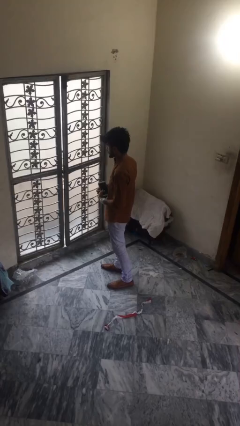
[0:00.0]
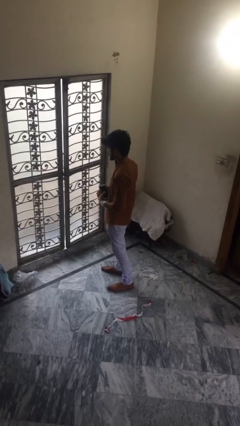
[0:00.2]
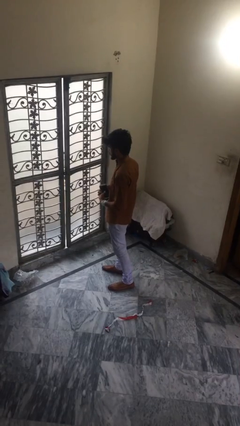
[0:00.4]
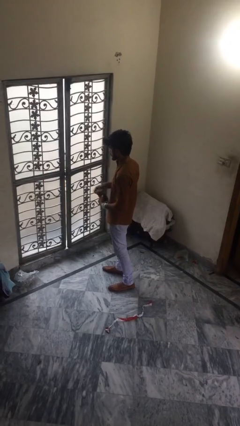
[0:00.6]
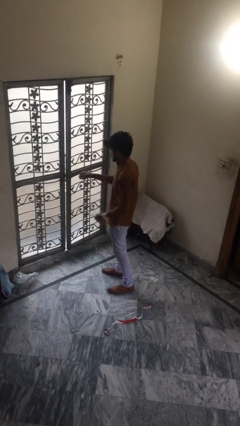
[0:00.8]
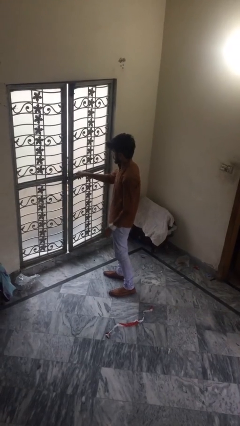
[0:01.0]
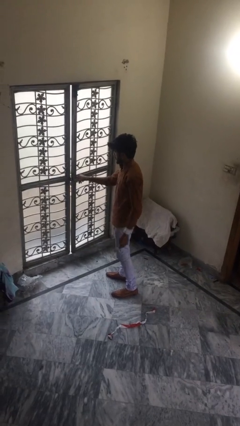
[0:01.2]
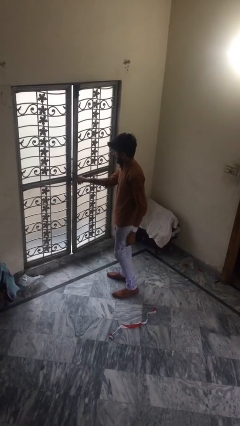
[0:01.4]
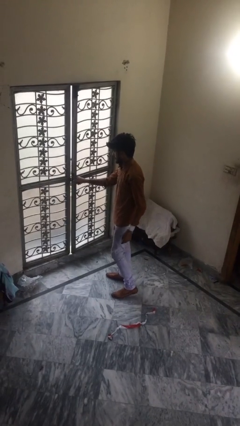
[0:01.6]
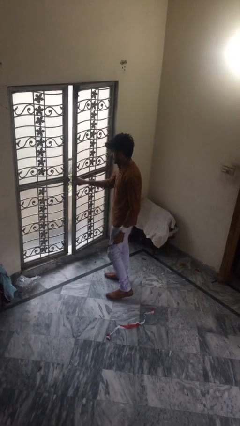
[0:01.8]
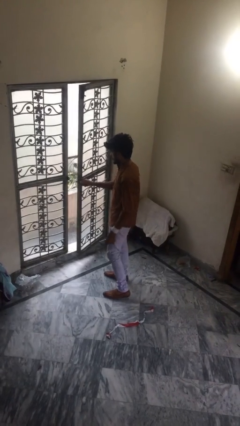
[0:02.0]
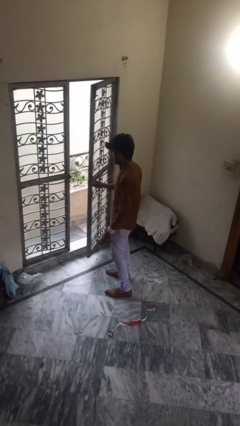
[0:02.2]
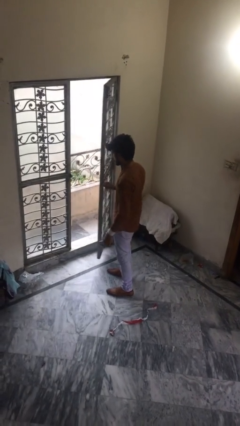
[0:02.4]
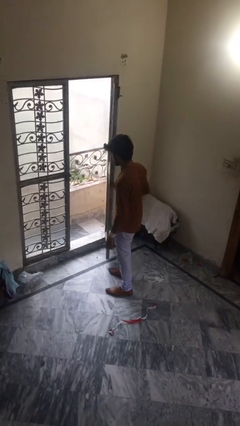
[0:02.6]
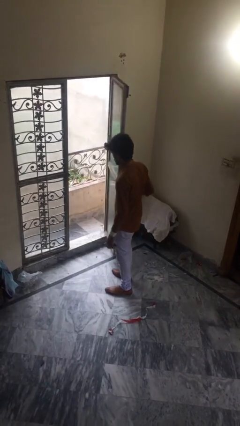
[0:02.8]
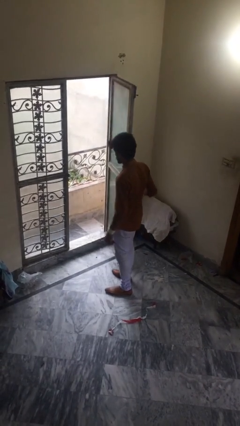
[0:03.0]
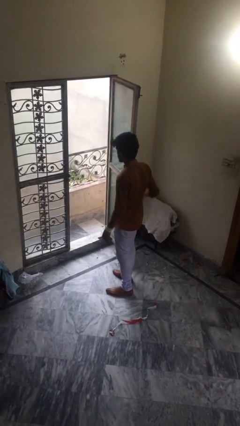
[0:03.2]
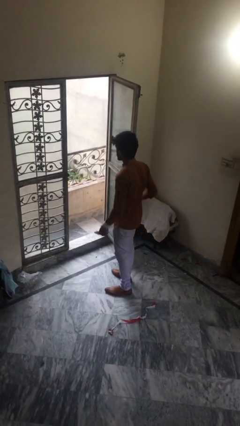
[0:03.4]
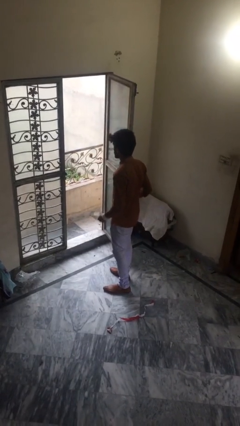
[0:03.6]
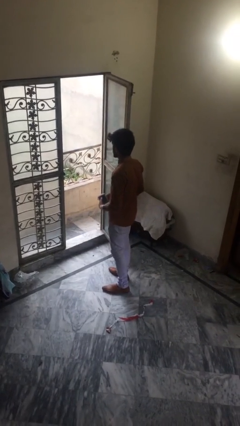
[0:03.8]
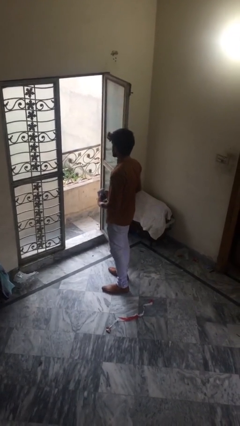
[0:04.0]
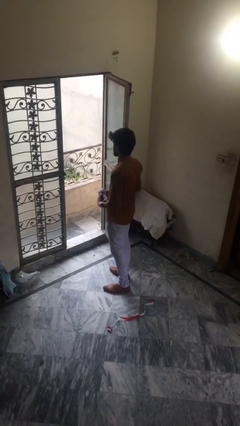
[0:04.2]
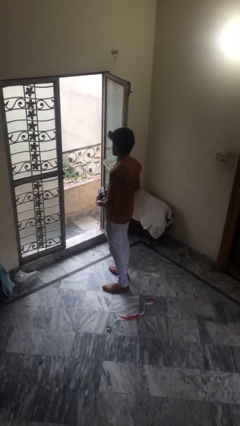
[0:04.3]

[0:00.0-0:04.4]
person opens facility door

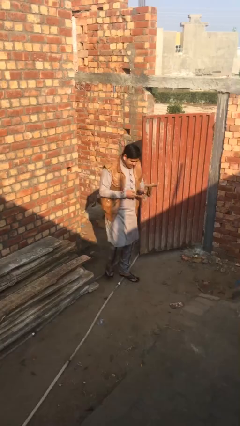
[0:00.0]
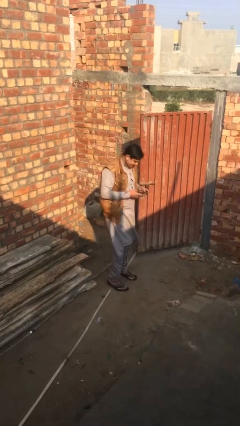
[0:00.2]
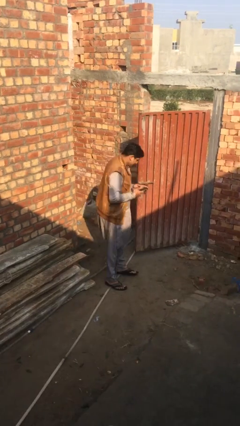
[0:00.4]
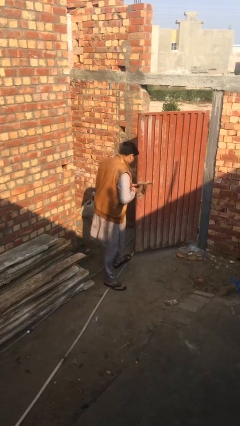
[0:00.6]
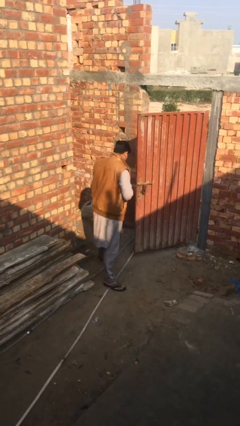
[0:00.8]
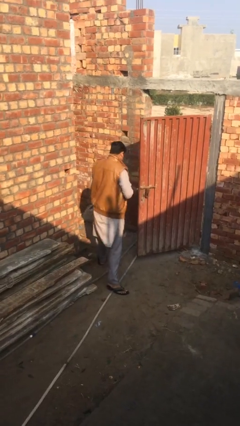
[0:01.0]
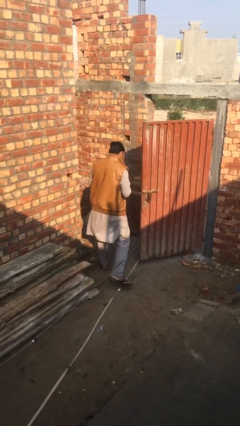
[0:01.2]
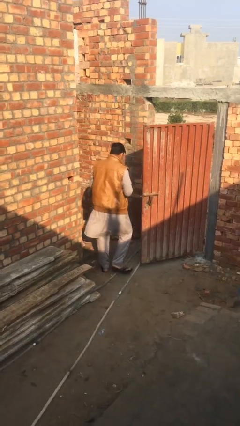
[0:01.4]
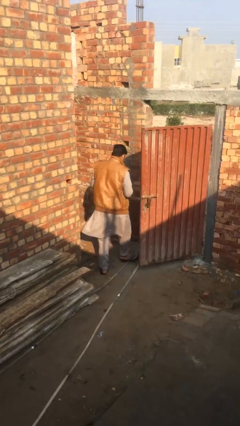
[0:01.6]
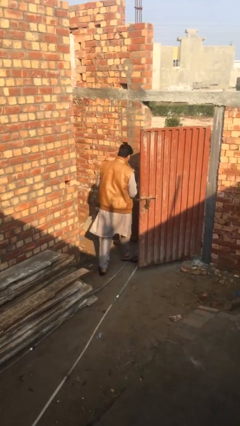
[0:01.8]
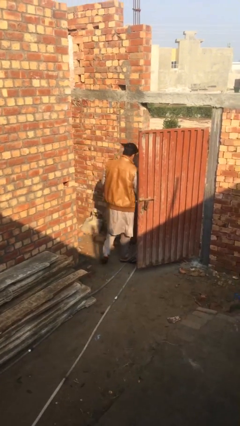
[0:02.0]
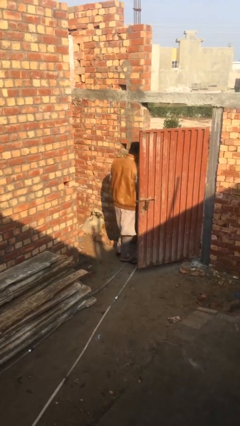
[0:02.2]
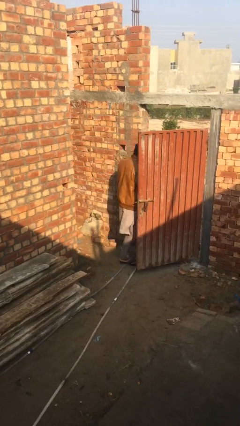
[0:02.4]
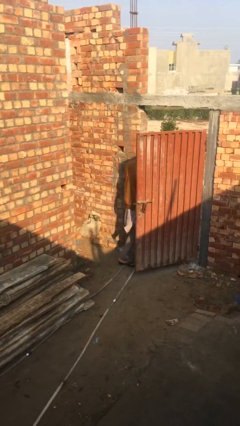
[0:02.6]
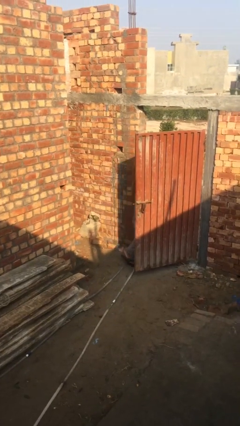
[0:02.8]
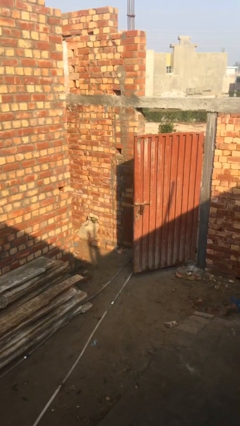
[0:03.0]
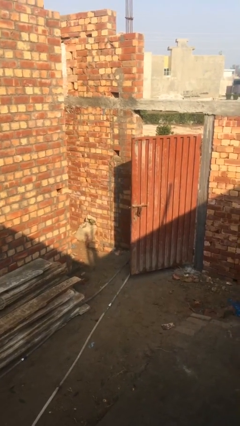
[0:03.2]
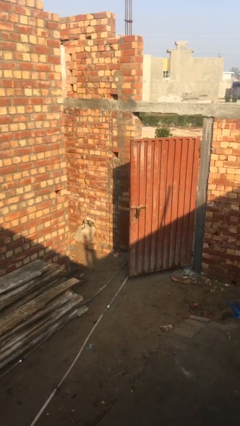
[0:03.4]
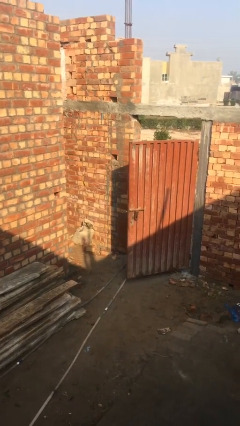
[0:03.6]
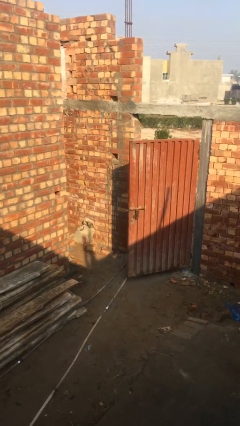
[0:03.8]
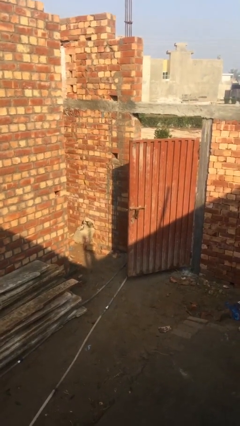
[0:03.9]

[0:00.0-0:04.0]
person exits scene through structure

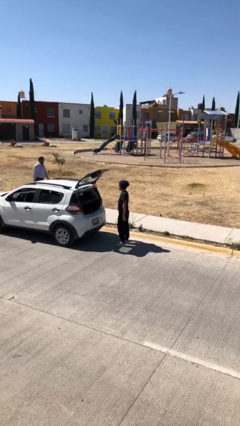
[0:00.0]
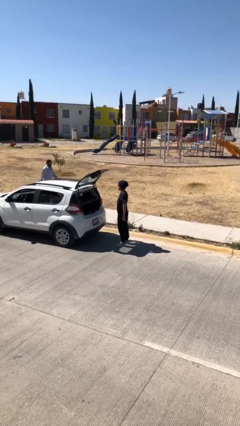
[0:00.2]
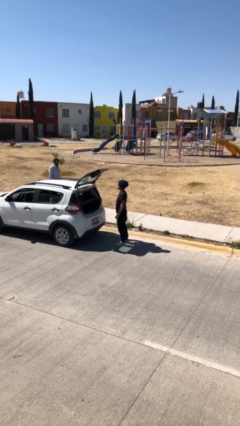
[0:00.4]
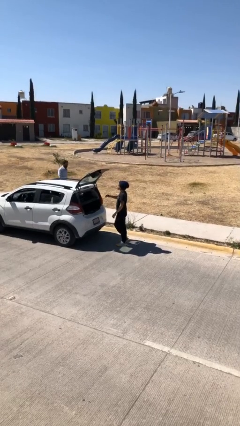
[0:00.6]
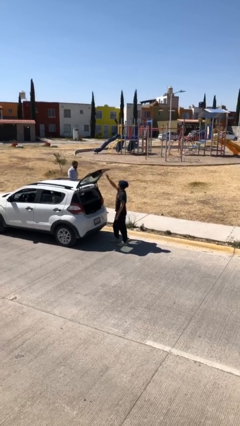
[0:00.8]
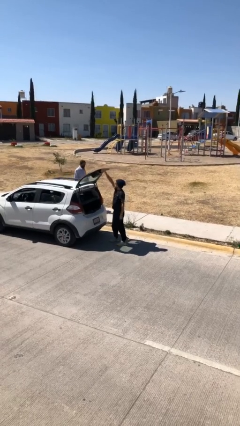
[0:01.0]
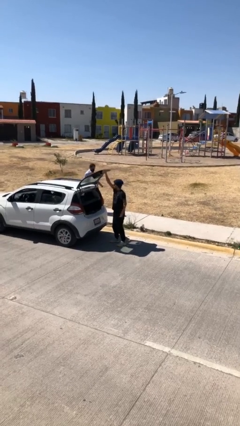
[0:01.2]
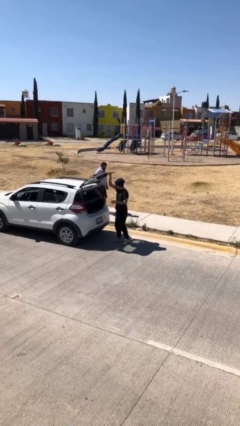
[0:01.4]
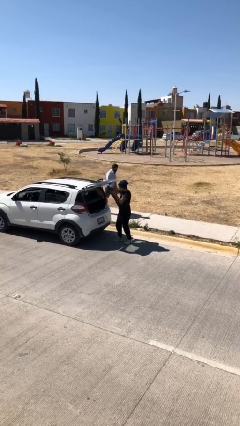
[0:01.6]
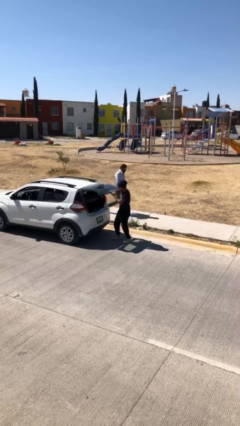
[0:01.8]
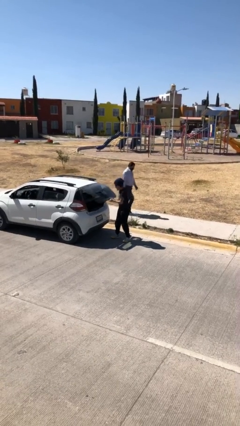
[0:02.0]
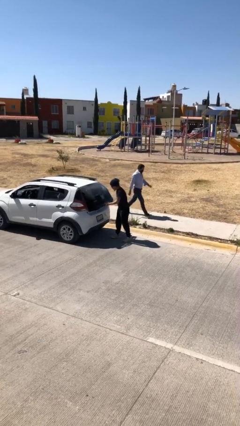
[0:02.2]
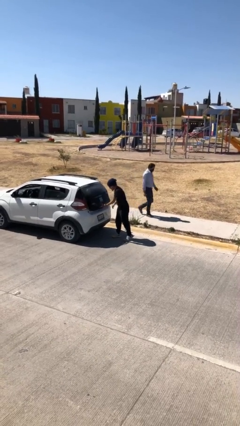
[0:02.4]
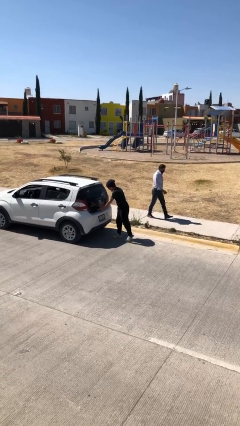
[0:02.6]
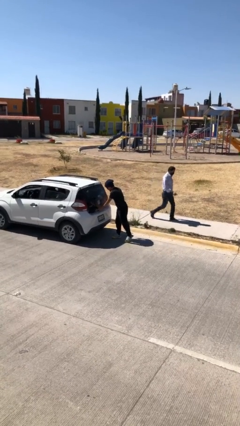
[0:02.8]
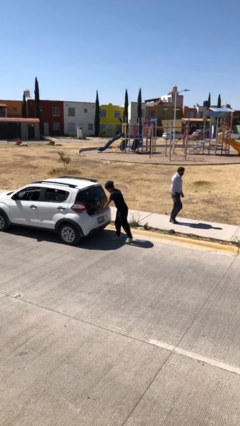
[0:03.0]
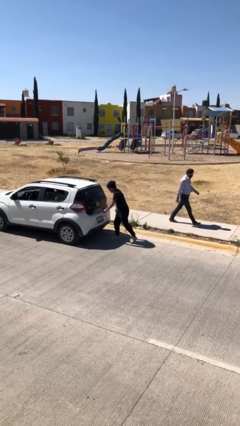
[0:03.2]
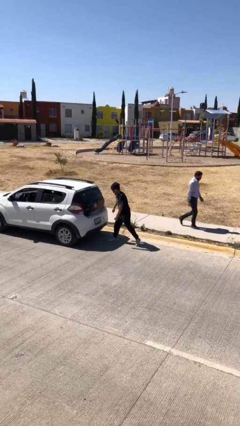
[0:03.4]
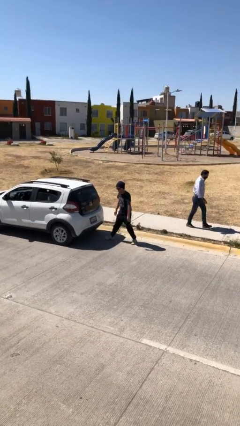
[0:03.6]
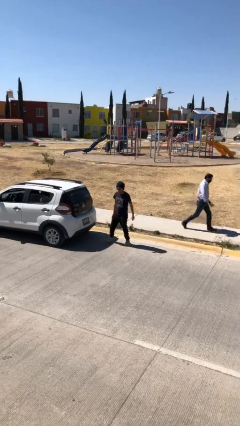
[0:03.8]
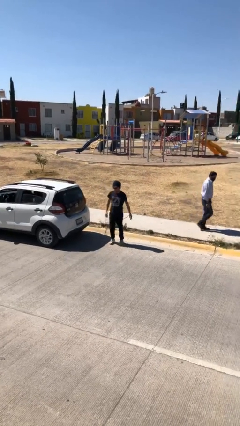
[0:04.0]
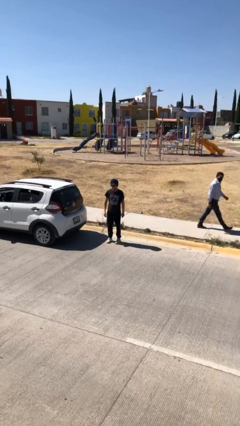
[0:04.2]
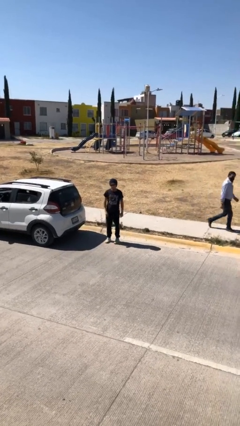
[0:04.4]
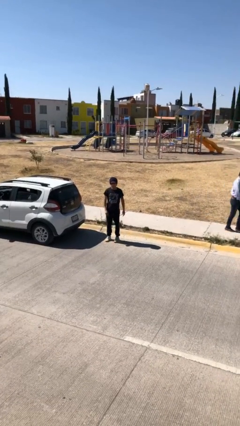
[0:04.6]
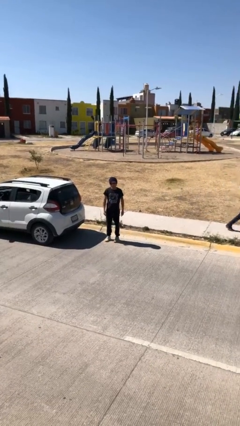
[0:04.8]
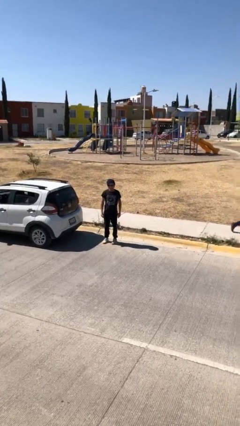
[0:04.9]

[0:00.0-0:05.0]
person closes car trunk

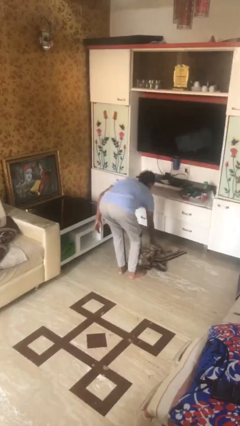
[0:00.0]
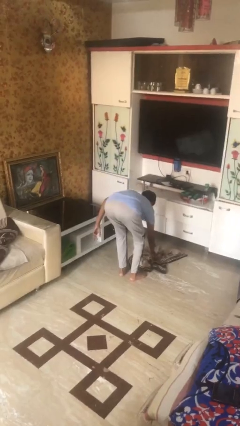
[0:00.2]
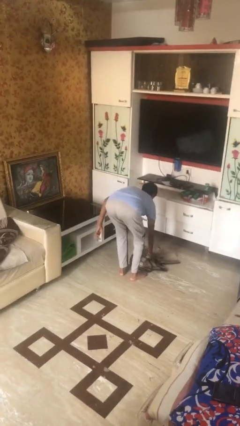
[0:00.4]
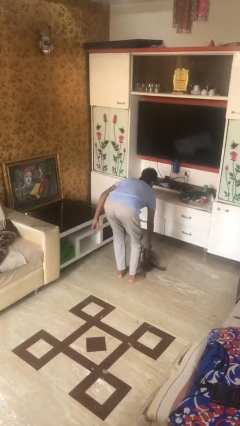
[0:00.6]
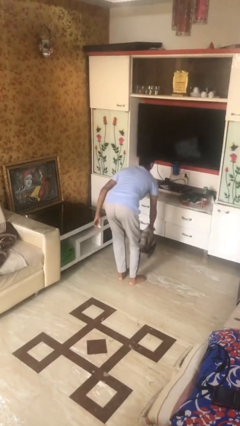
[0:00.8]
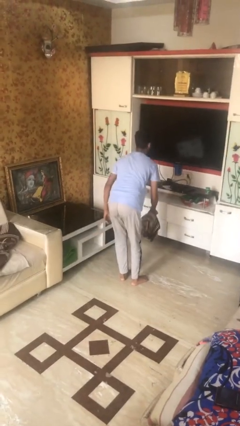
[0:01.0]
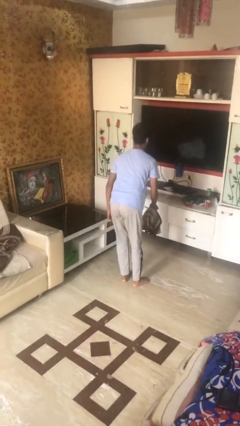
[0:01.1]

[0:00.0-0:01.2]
person picks up object from floor

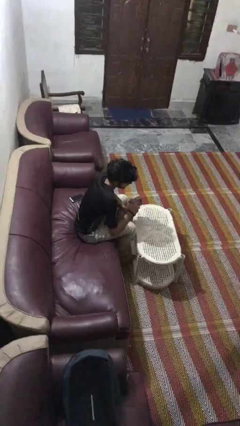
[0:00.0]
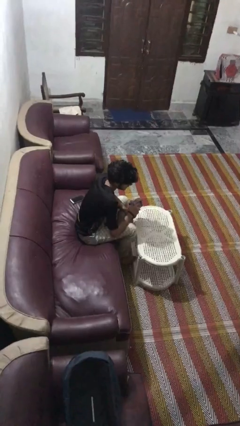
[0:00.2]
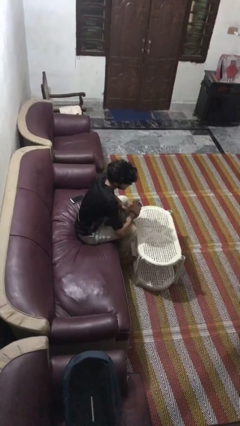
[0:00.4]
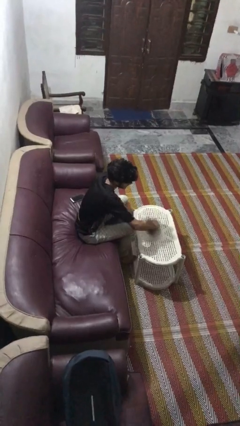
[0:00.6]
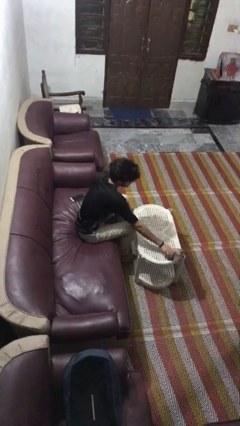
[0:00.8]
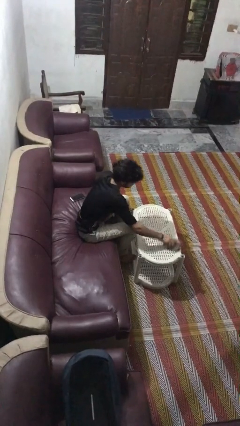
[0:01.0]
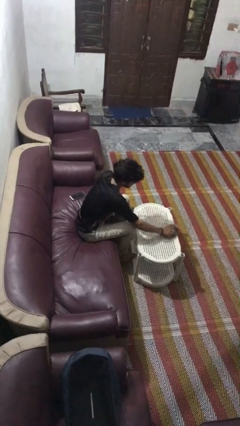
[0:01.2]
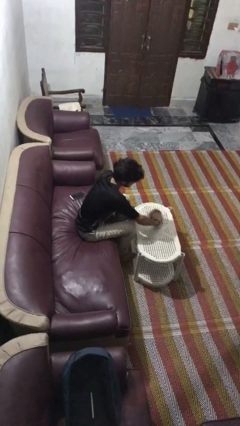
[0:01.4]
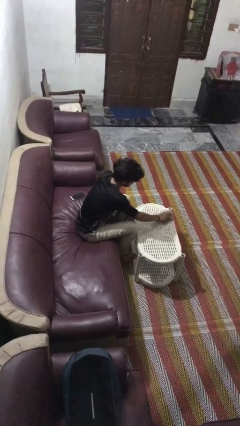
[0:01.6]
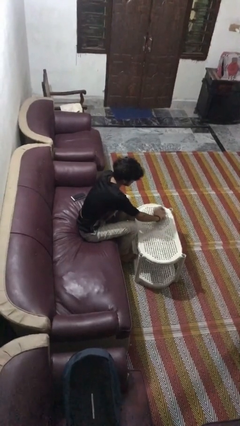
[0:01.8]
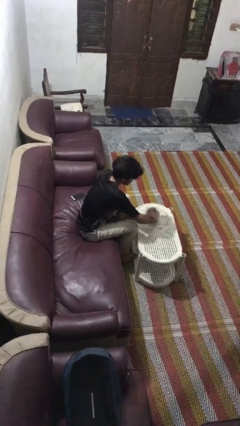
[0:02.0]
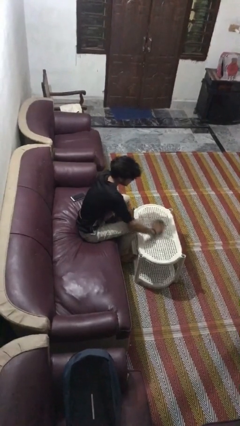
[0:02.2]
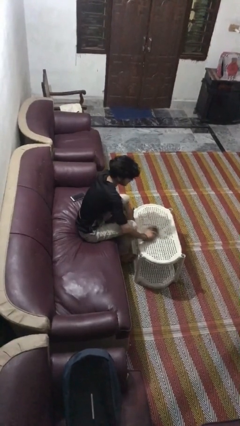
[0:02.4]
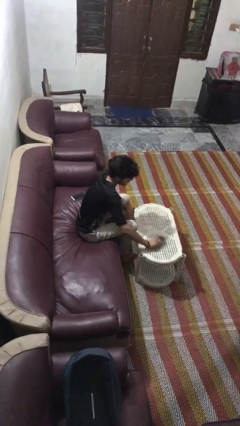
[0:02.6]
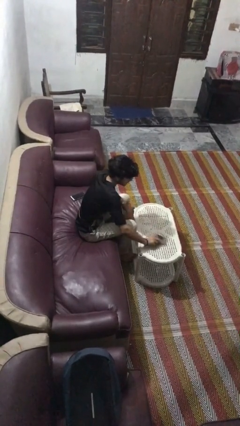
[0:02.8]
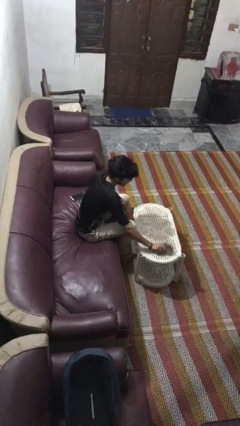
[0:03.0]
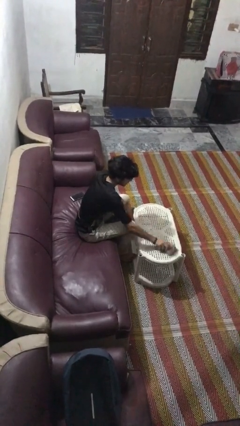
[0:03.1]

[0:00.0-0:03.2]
person cleans table with rag
